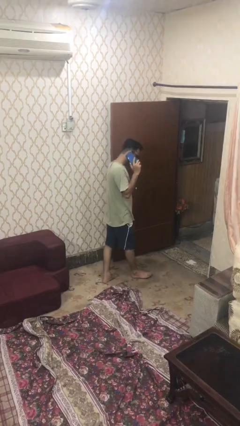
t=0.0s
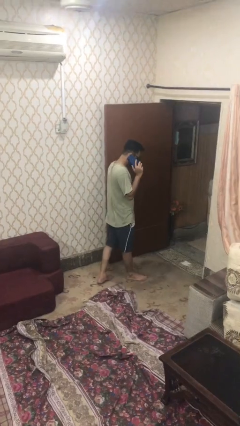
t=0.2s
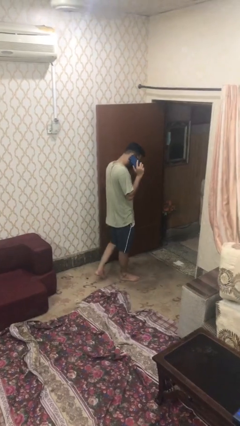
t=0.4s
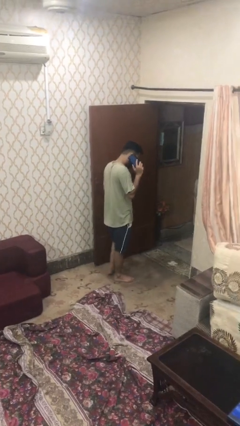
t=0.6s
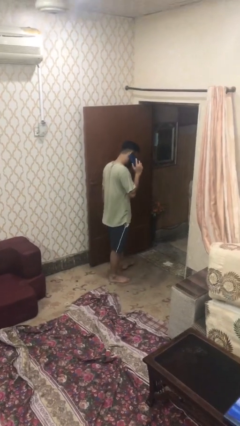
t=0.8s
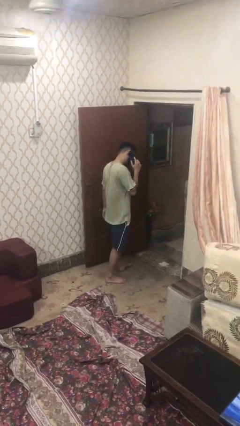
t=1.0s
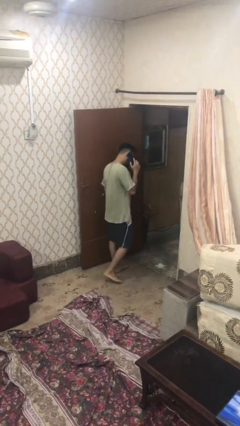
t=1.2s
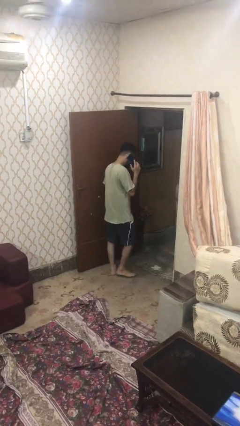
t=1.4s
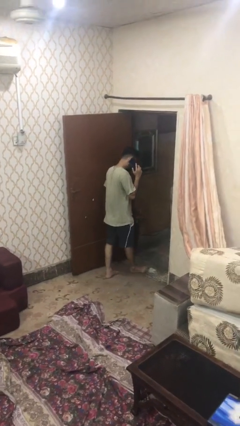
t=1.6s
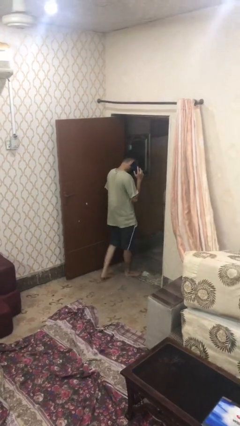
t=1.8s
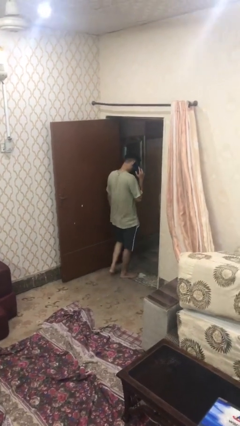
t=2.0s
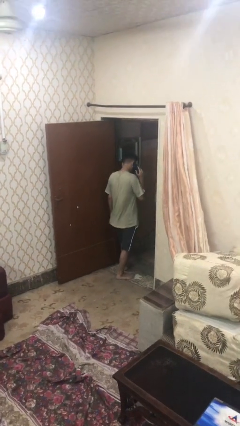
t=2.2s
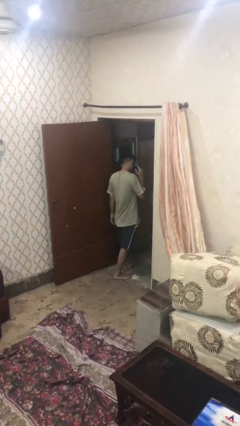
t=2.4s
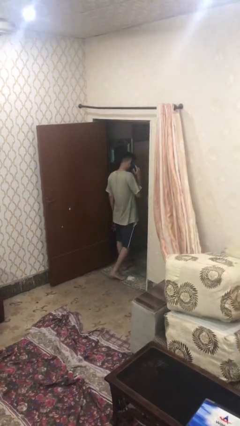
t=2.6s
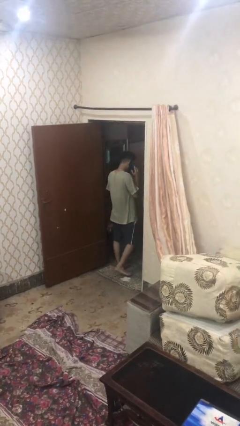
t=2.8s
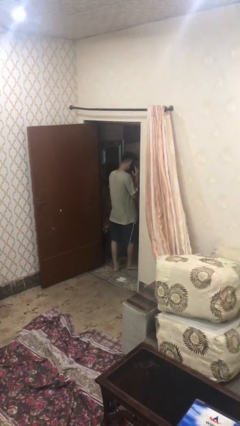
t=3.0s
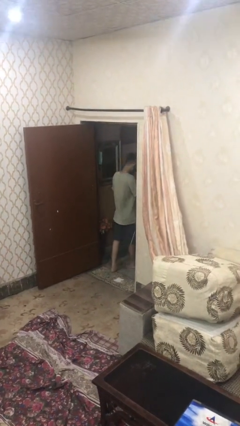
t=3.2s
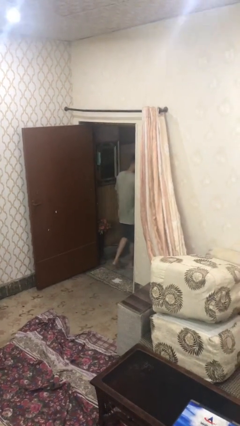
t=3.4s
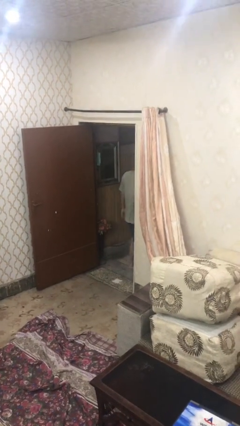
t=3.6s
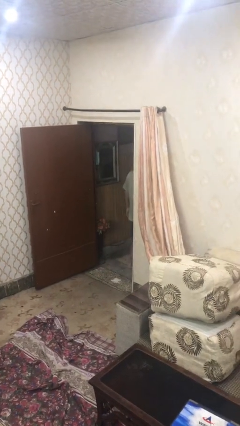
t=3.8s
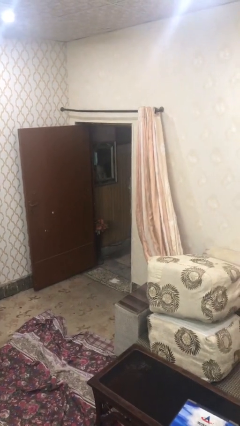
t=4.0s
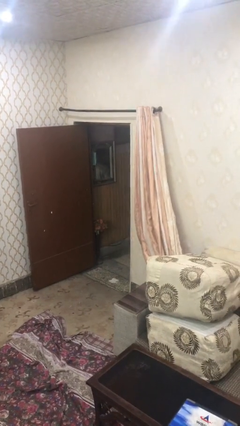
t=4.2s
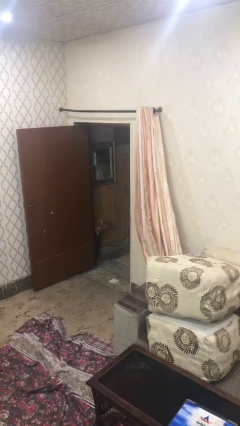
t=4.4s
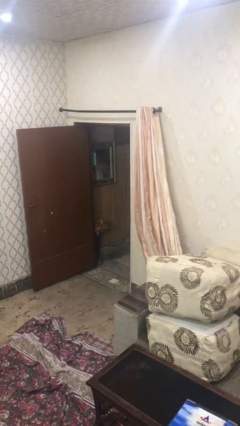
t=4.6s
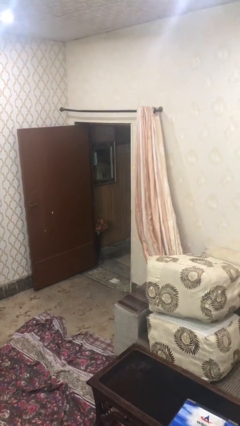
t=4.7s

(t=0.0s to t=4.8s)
person exits scene through structure

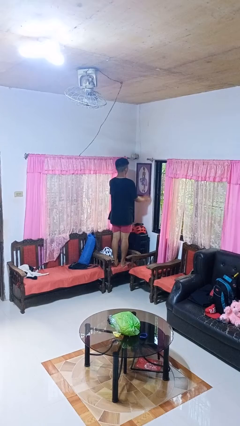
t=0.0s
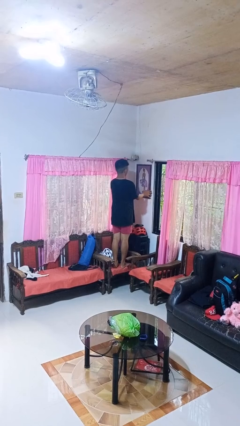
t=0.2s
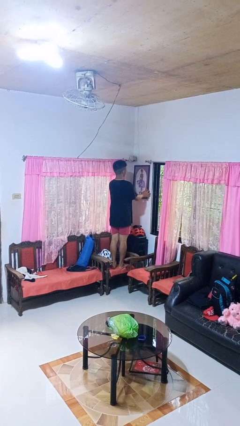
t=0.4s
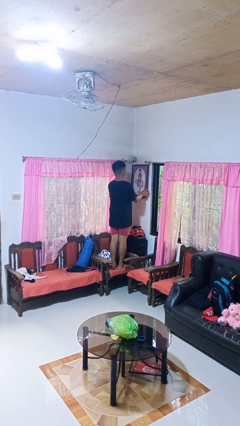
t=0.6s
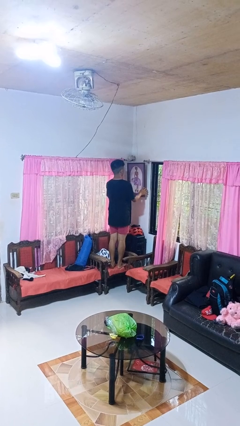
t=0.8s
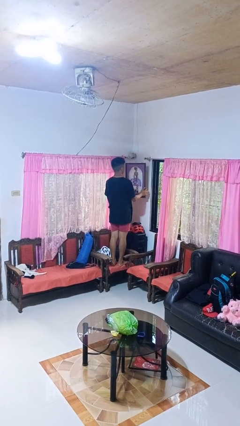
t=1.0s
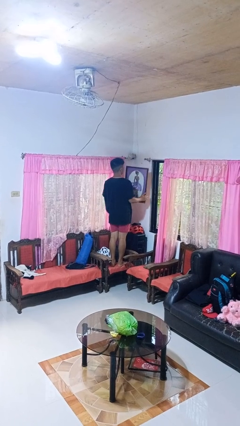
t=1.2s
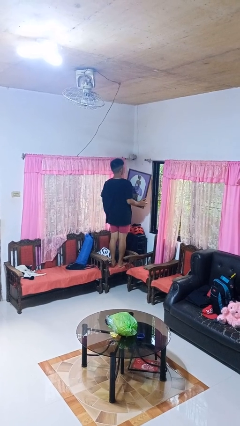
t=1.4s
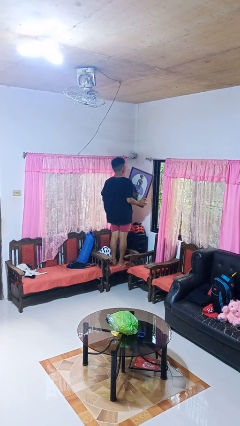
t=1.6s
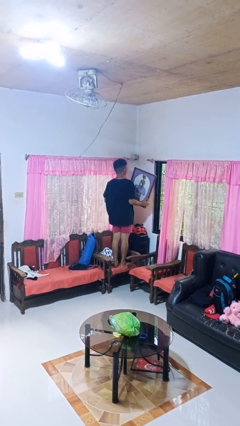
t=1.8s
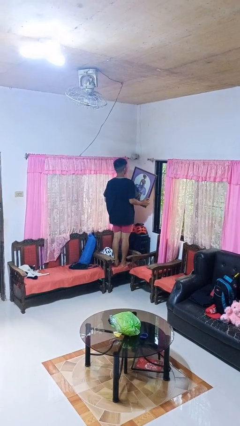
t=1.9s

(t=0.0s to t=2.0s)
person takes down picture frame

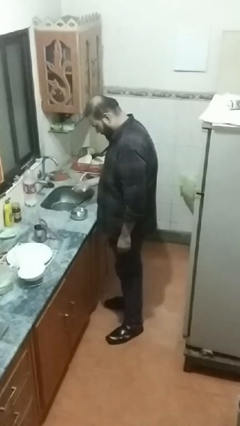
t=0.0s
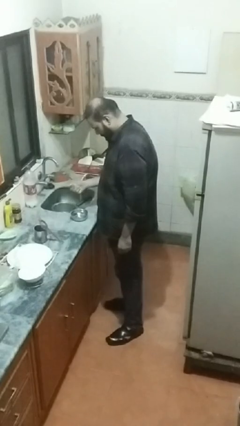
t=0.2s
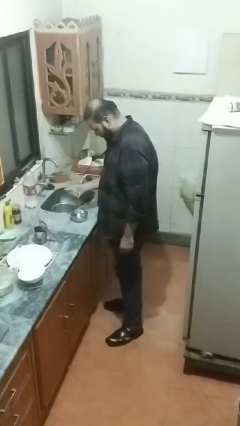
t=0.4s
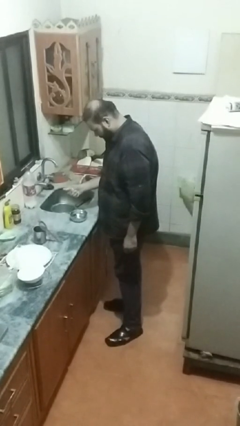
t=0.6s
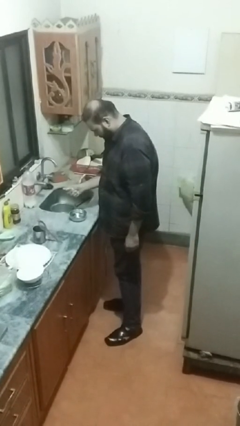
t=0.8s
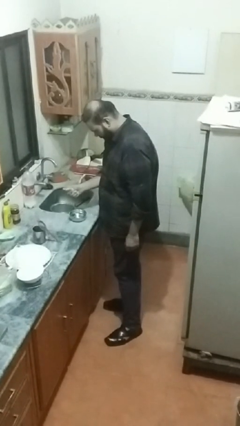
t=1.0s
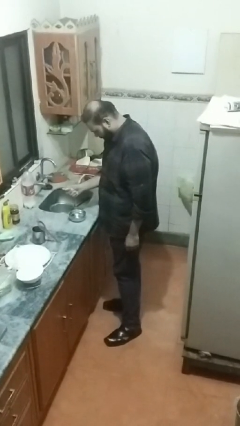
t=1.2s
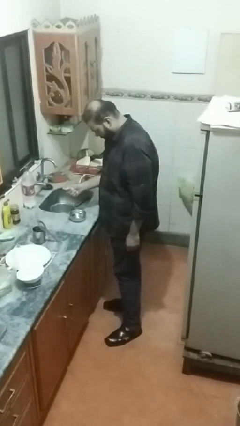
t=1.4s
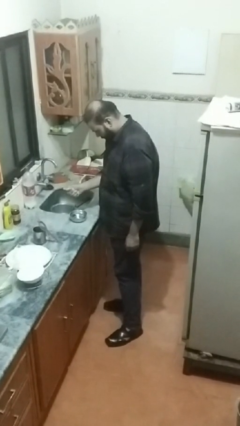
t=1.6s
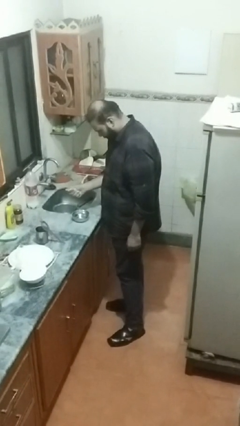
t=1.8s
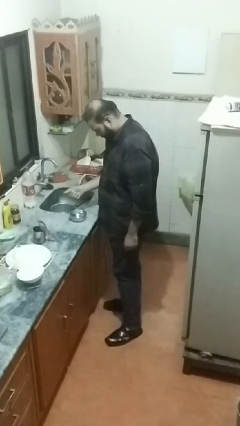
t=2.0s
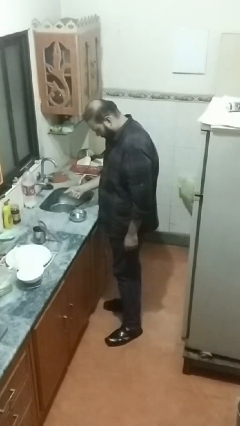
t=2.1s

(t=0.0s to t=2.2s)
person pours into bowl

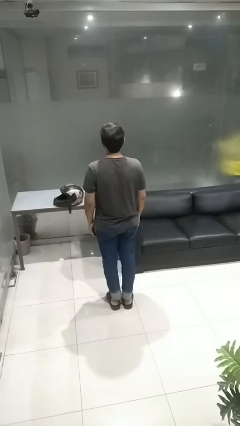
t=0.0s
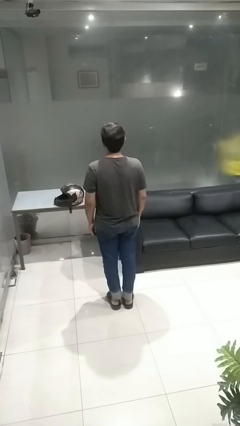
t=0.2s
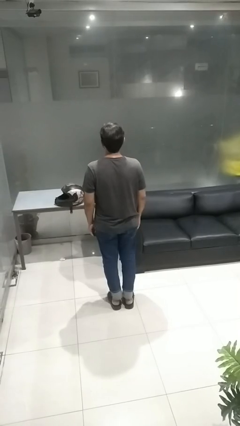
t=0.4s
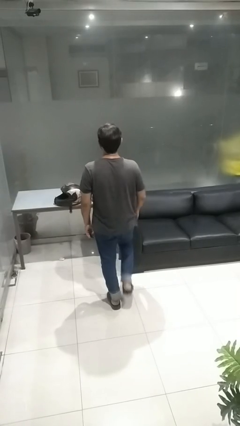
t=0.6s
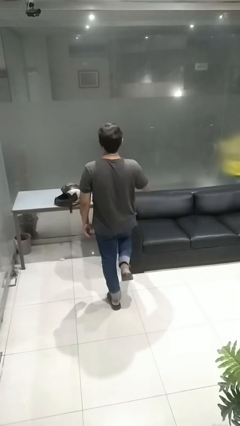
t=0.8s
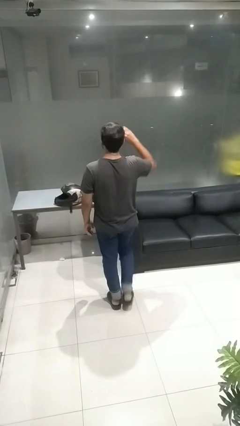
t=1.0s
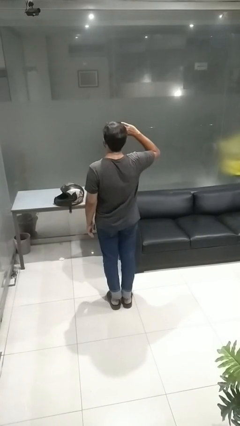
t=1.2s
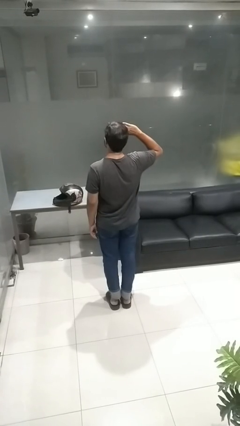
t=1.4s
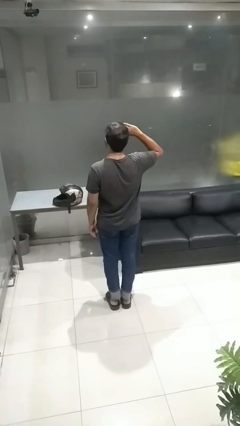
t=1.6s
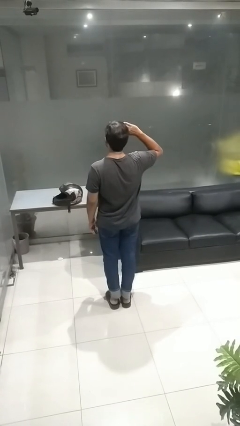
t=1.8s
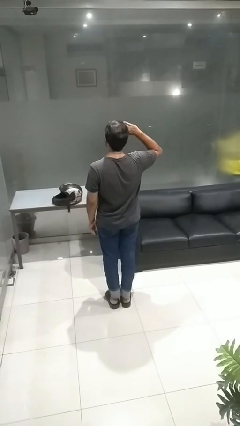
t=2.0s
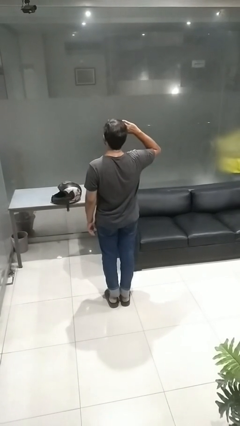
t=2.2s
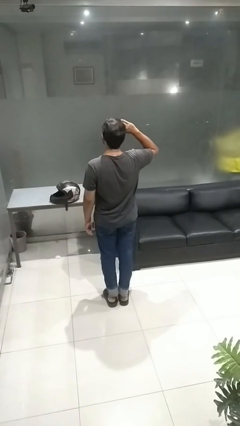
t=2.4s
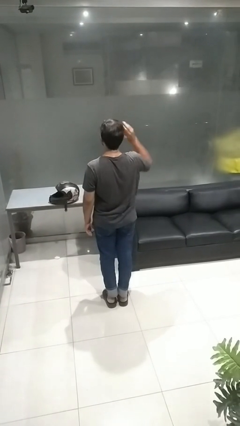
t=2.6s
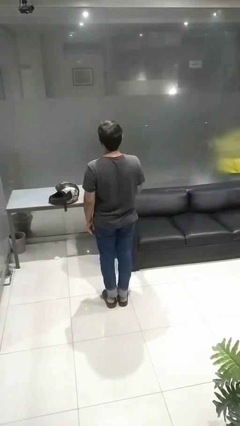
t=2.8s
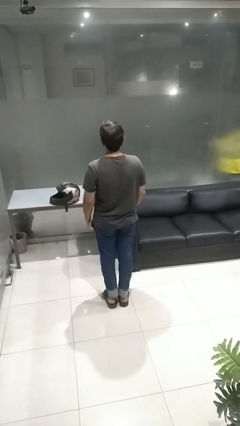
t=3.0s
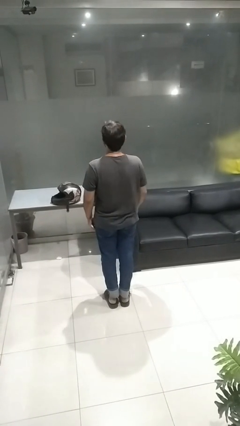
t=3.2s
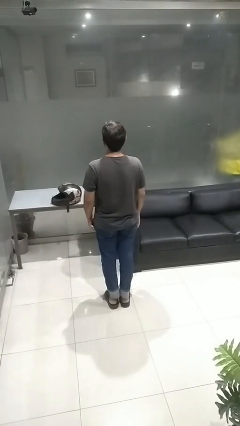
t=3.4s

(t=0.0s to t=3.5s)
person salutes

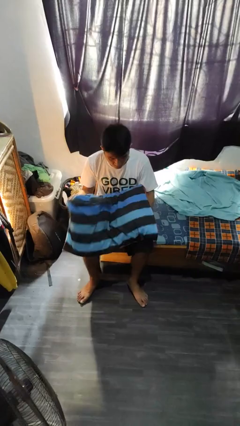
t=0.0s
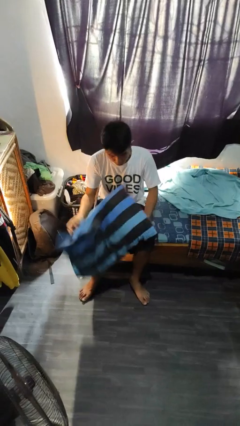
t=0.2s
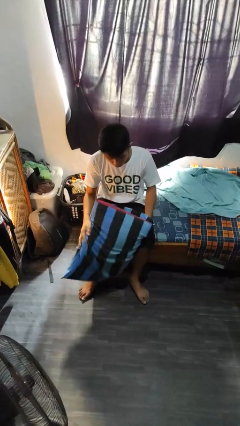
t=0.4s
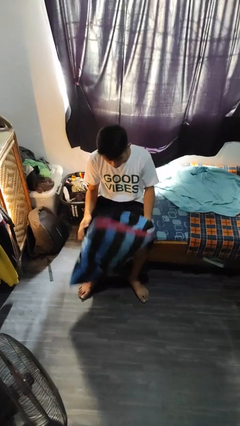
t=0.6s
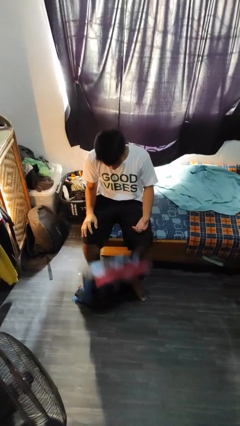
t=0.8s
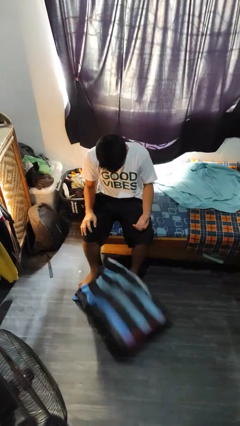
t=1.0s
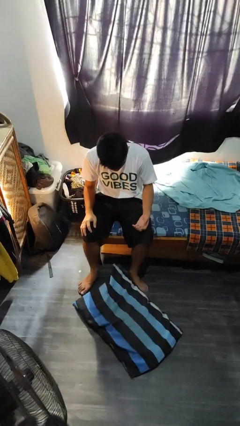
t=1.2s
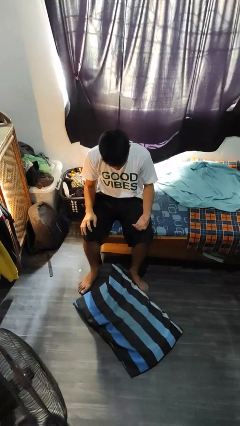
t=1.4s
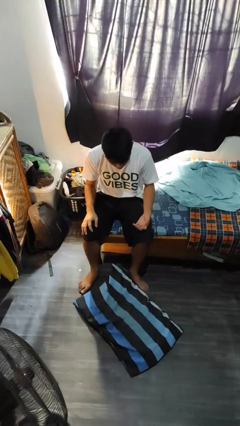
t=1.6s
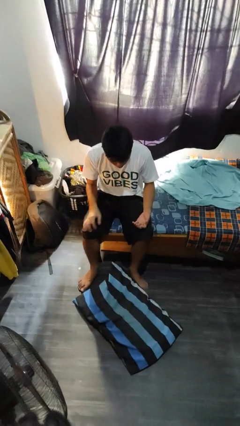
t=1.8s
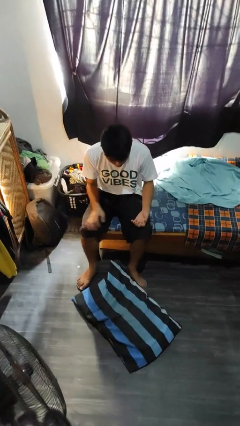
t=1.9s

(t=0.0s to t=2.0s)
person drops object

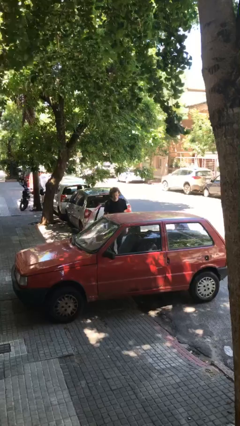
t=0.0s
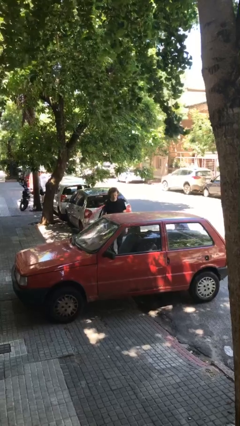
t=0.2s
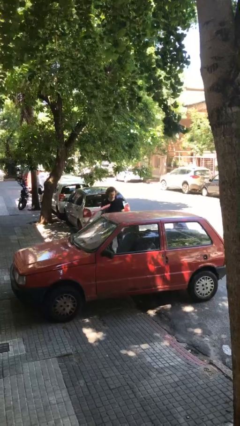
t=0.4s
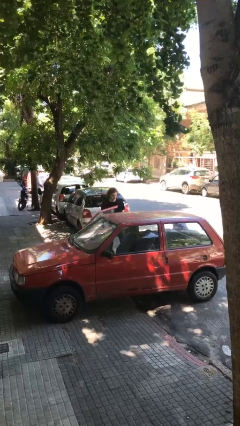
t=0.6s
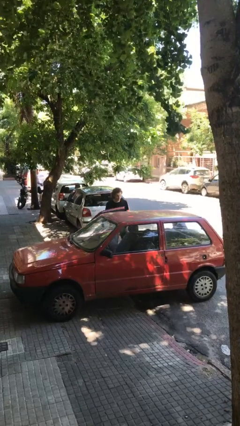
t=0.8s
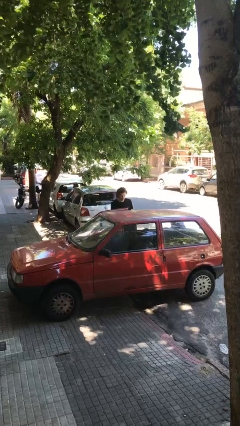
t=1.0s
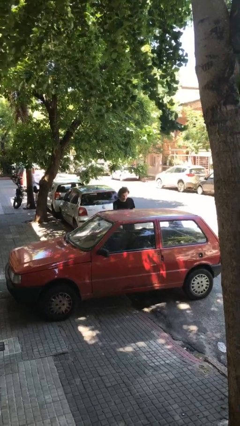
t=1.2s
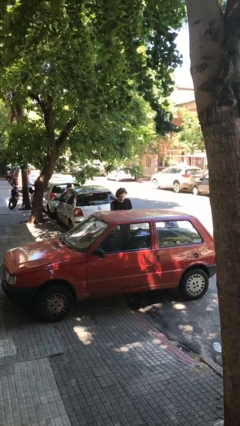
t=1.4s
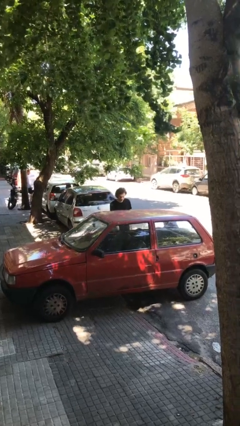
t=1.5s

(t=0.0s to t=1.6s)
person closes car door

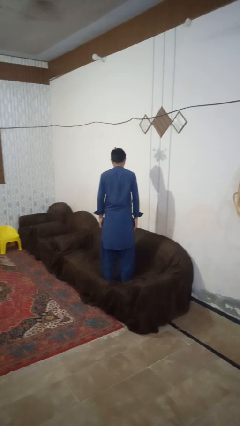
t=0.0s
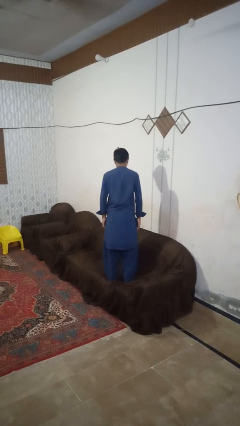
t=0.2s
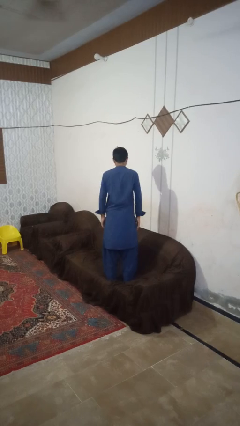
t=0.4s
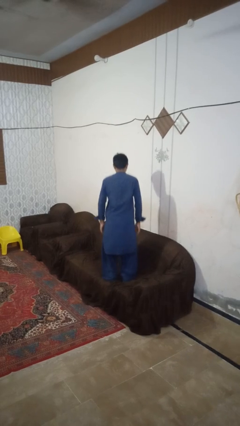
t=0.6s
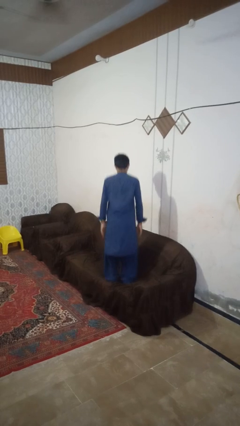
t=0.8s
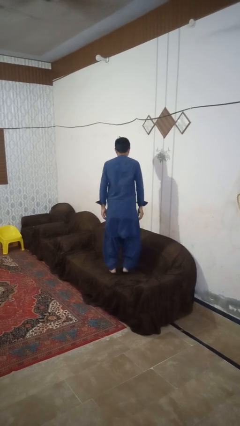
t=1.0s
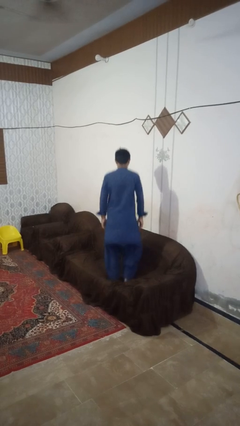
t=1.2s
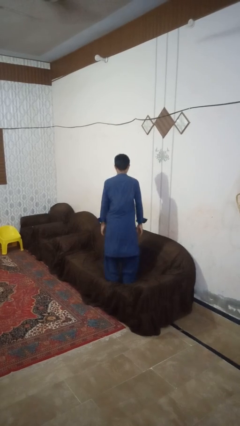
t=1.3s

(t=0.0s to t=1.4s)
person jumps on couch
